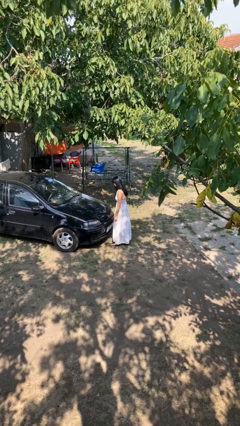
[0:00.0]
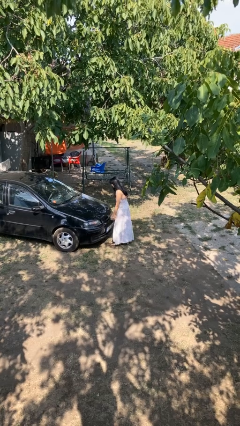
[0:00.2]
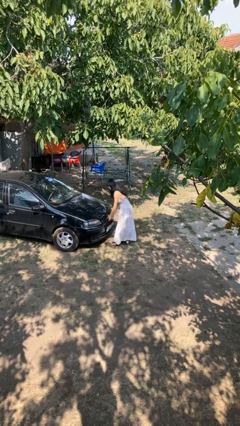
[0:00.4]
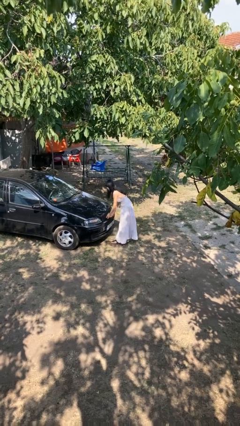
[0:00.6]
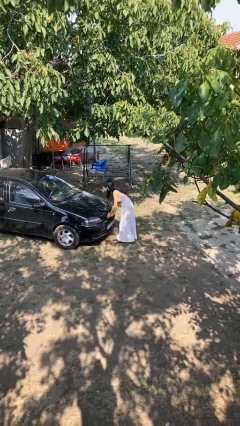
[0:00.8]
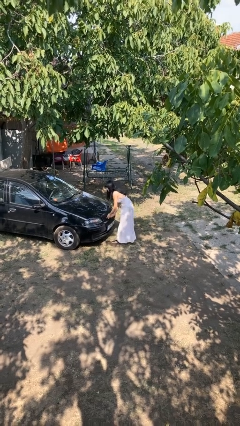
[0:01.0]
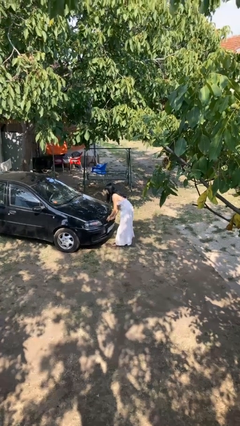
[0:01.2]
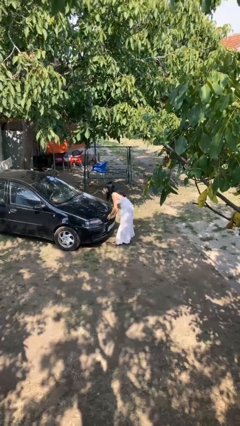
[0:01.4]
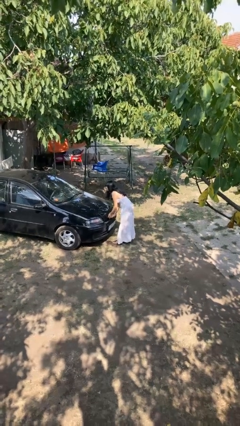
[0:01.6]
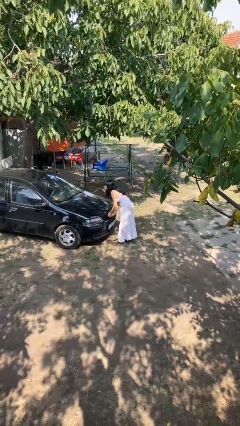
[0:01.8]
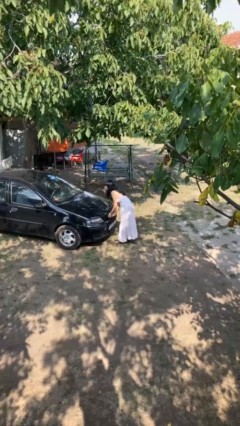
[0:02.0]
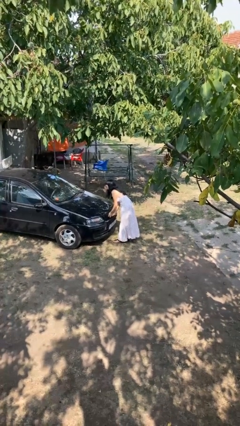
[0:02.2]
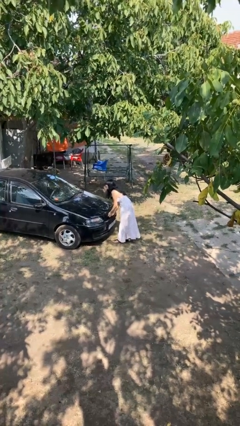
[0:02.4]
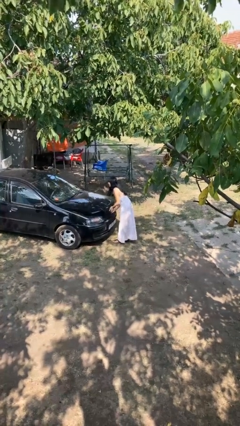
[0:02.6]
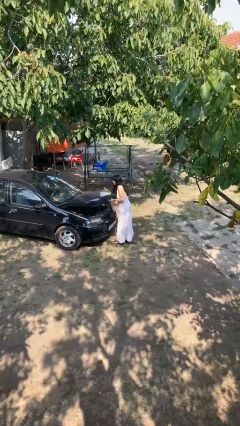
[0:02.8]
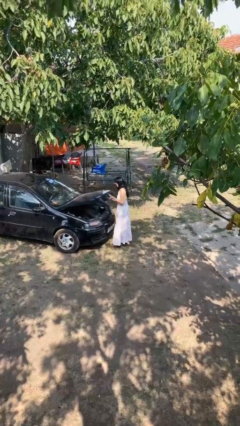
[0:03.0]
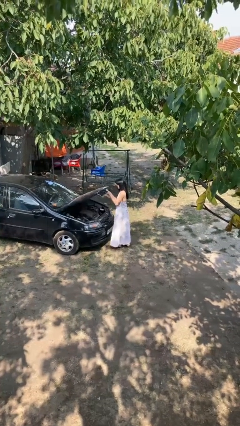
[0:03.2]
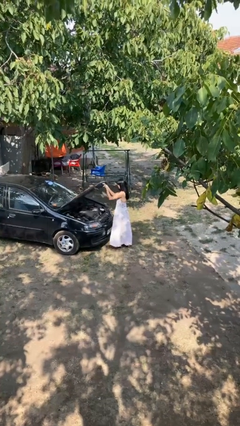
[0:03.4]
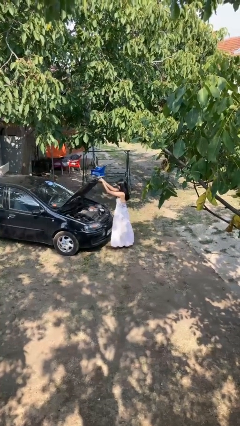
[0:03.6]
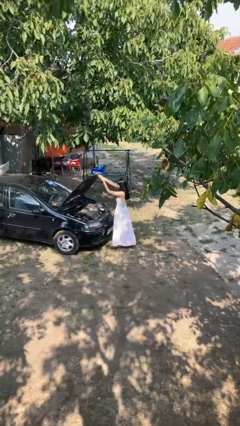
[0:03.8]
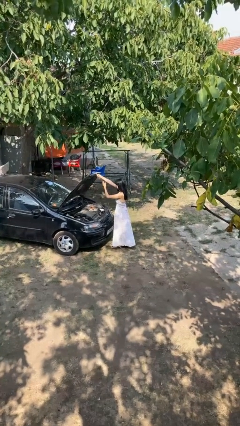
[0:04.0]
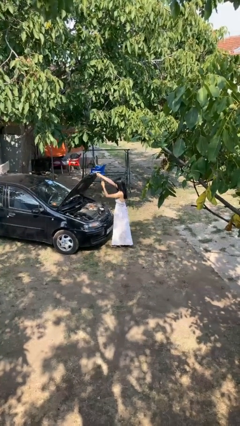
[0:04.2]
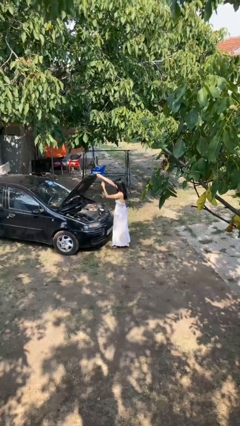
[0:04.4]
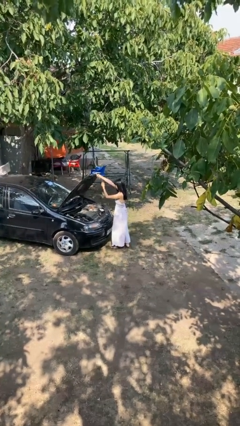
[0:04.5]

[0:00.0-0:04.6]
person opens car hood

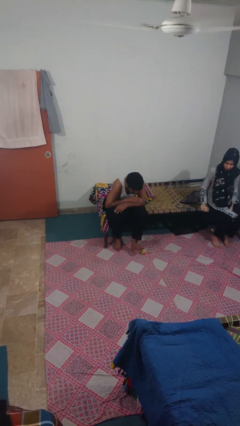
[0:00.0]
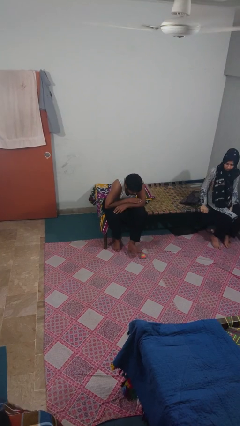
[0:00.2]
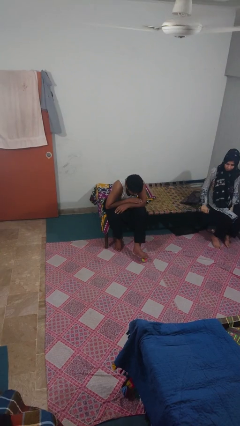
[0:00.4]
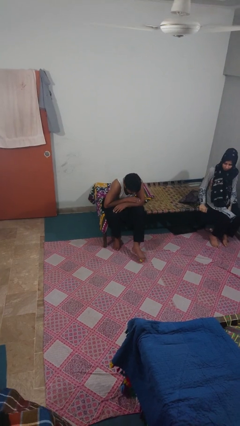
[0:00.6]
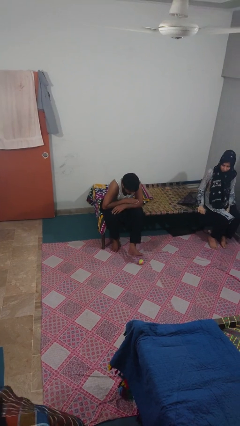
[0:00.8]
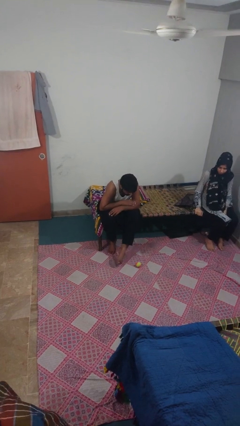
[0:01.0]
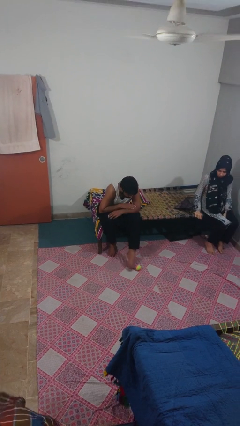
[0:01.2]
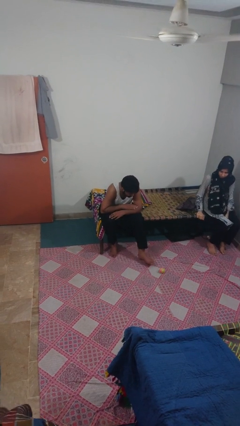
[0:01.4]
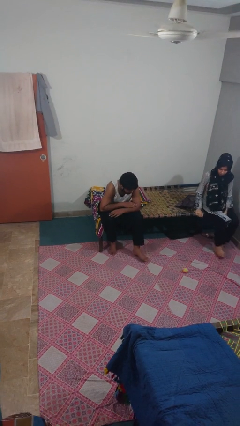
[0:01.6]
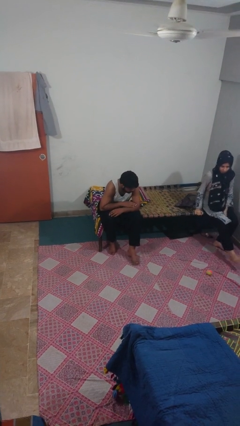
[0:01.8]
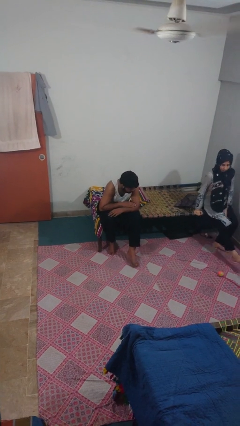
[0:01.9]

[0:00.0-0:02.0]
person kicks object to person

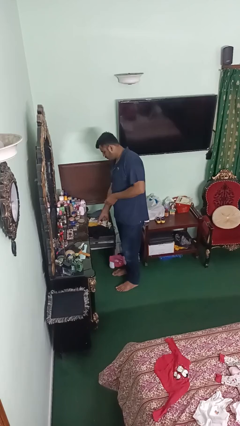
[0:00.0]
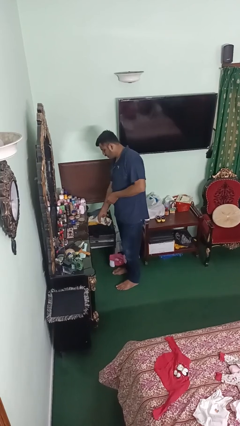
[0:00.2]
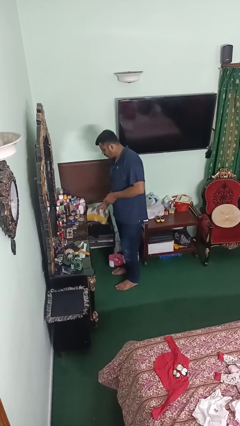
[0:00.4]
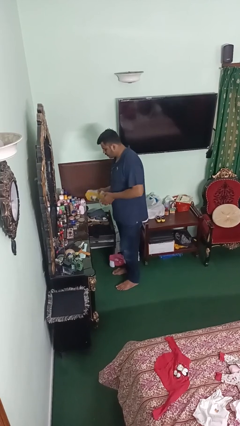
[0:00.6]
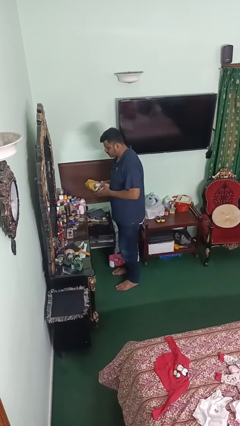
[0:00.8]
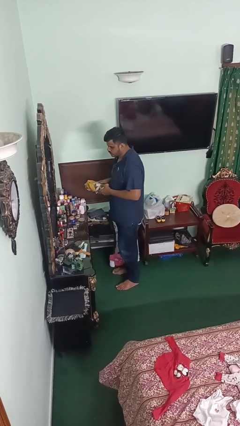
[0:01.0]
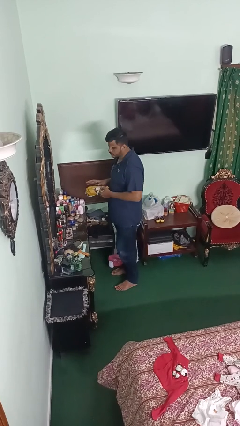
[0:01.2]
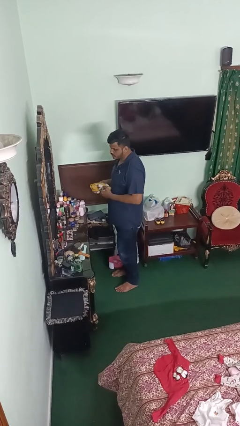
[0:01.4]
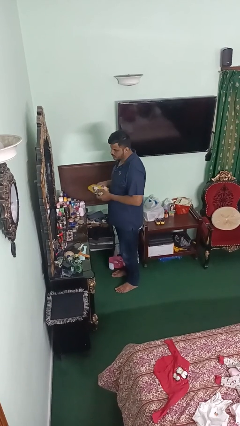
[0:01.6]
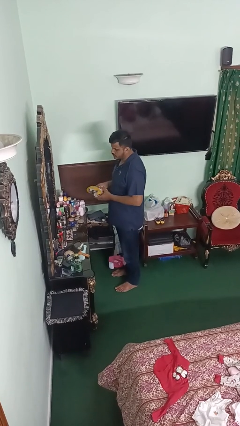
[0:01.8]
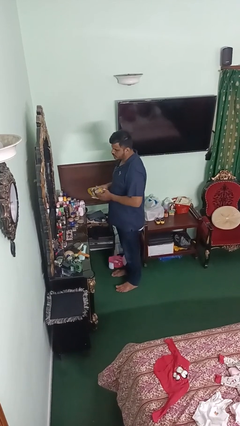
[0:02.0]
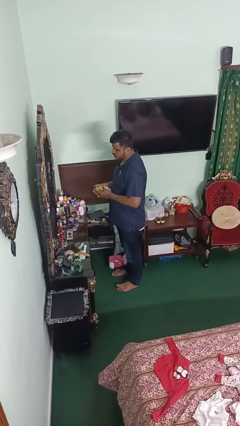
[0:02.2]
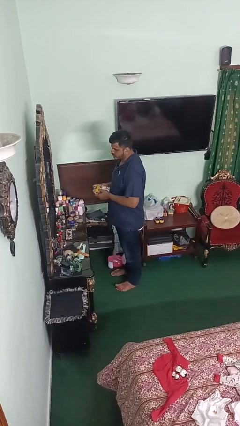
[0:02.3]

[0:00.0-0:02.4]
person takes clothes from dresser

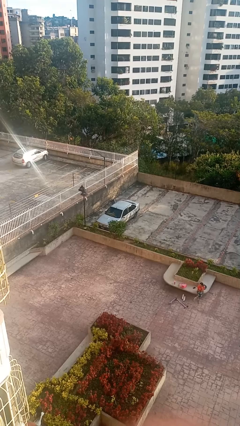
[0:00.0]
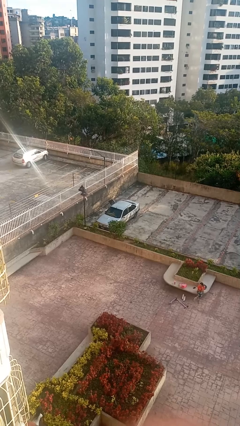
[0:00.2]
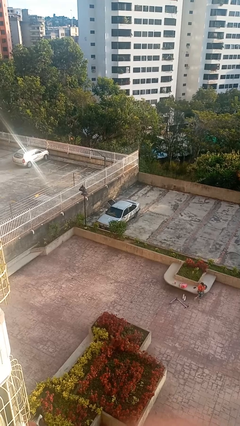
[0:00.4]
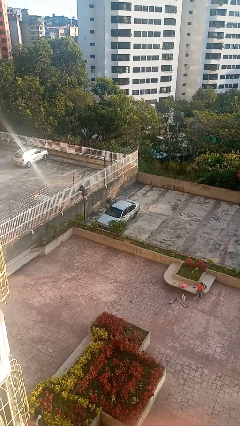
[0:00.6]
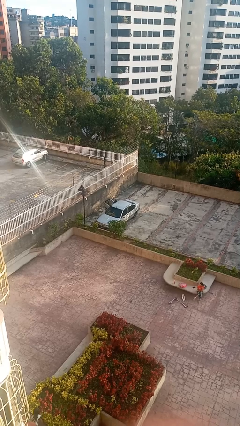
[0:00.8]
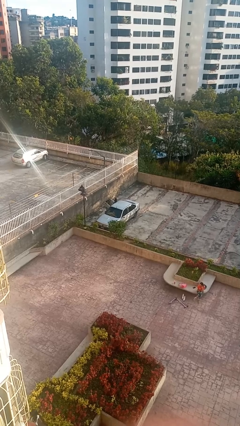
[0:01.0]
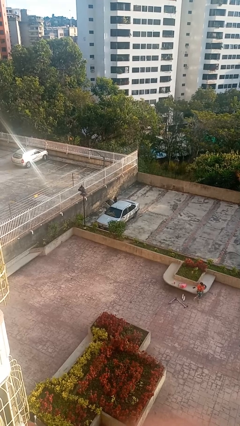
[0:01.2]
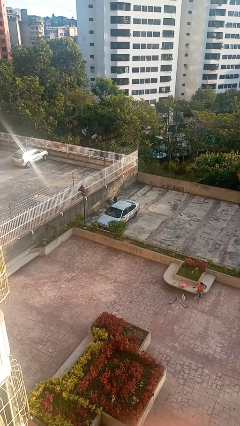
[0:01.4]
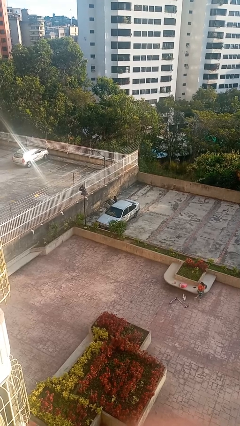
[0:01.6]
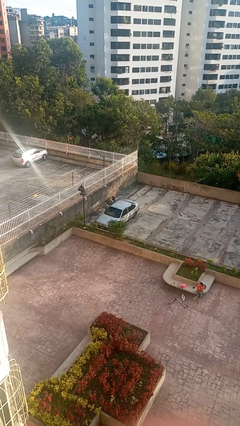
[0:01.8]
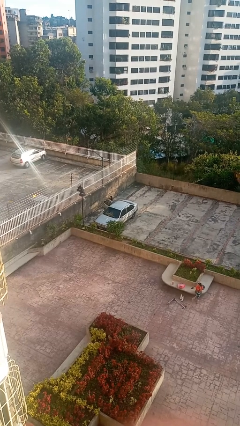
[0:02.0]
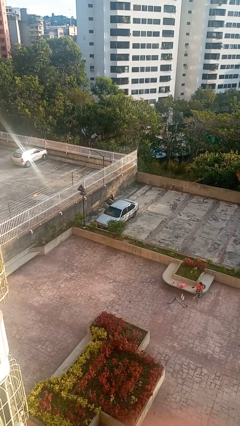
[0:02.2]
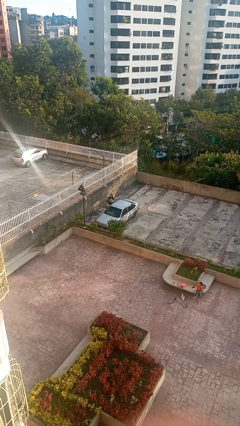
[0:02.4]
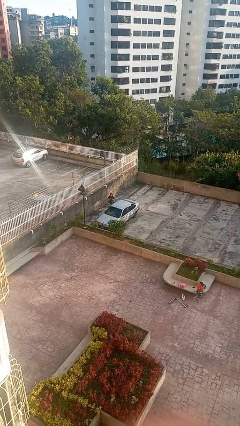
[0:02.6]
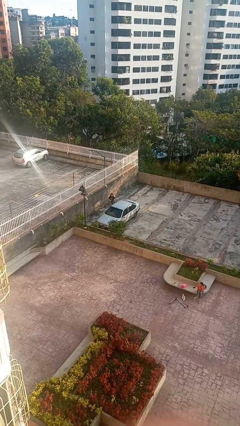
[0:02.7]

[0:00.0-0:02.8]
car drops off person

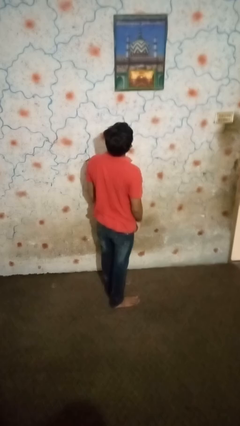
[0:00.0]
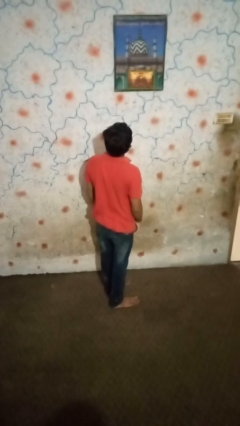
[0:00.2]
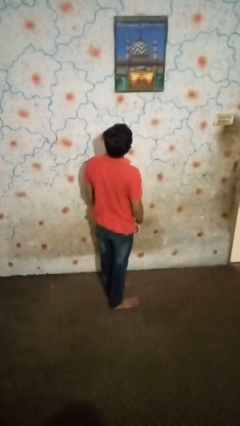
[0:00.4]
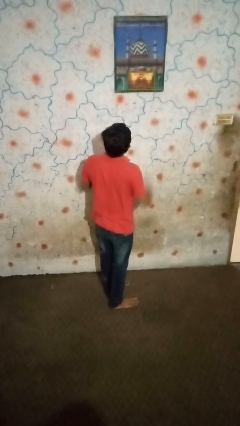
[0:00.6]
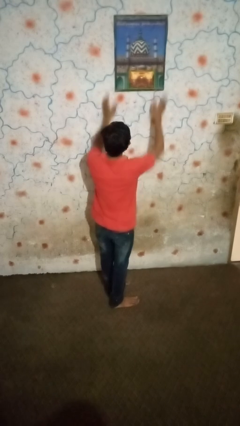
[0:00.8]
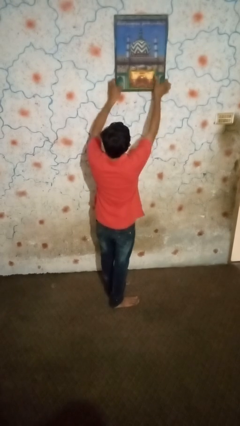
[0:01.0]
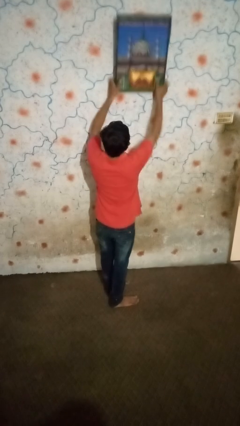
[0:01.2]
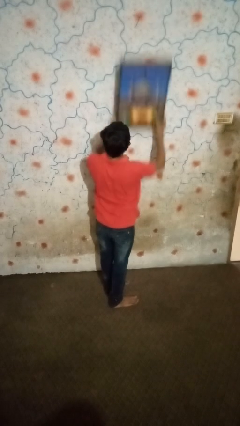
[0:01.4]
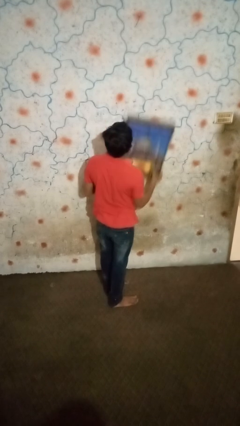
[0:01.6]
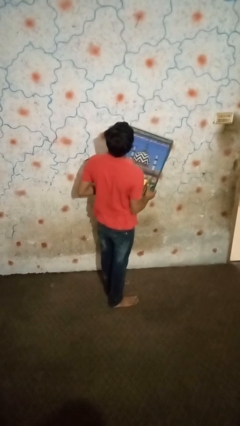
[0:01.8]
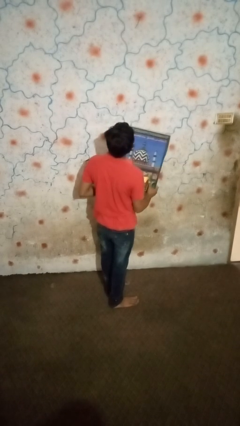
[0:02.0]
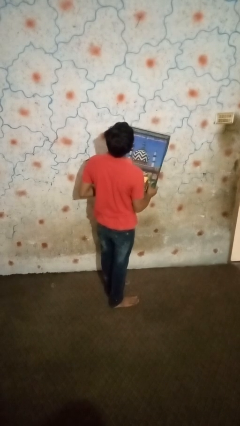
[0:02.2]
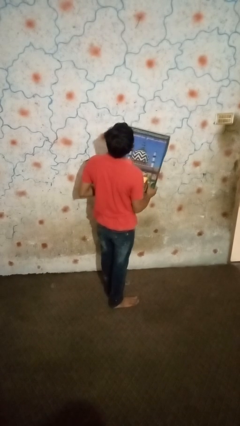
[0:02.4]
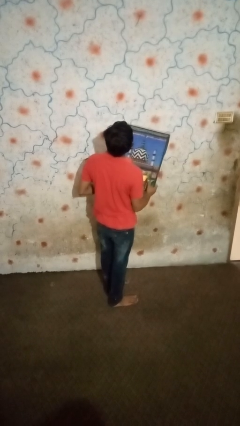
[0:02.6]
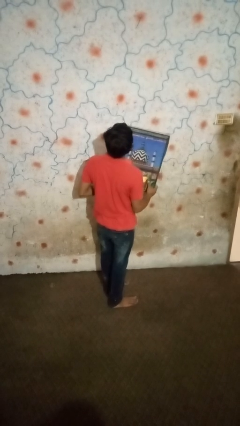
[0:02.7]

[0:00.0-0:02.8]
person takes down picture frame

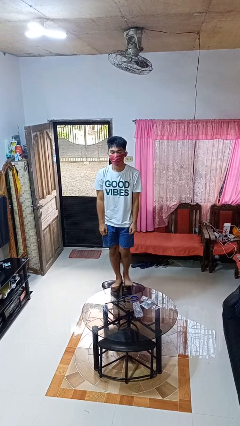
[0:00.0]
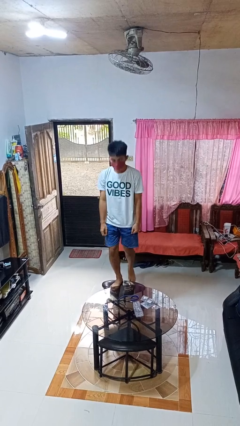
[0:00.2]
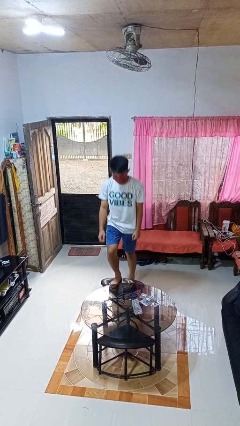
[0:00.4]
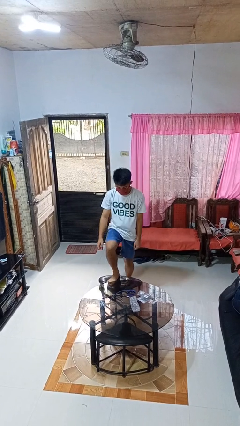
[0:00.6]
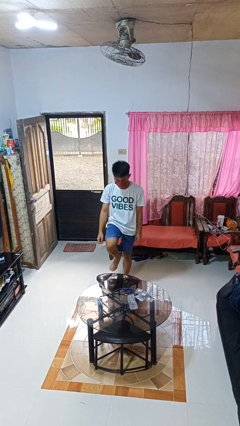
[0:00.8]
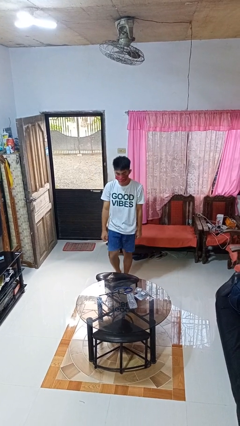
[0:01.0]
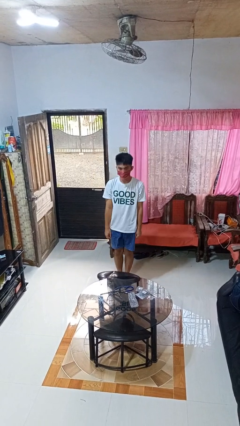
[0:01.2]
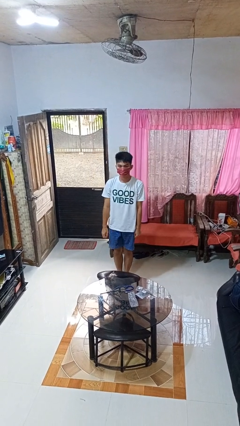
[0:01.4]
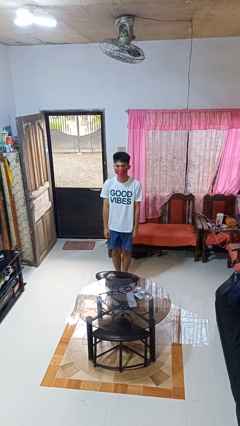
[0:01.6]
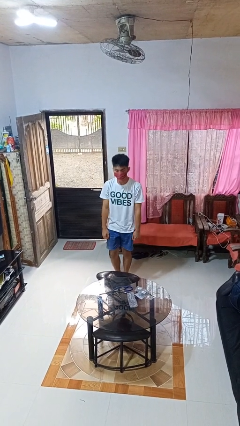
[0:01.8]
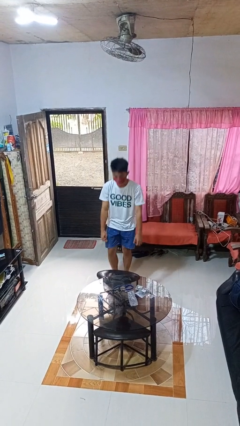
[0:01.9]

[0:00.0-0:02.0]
person climbs off chair

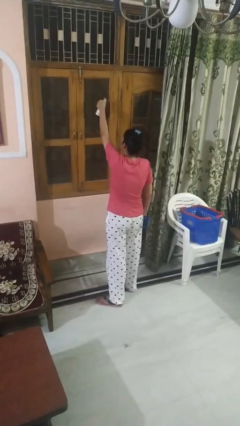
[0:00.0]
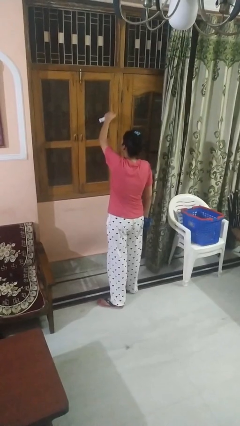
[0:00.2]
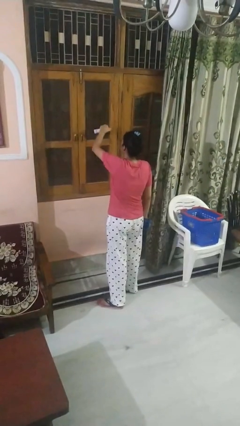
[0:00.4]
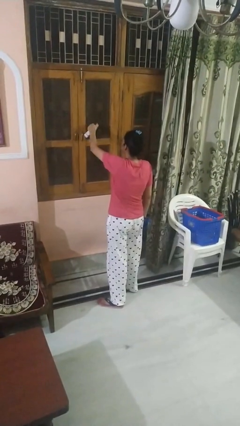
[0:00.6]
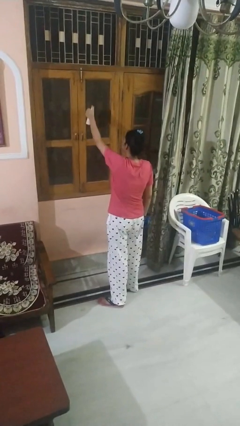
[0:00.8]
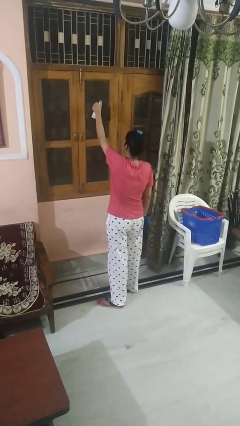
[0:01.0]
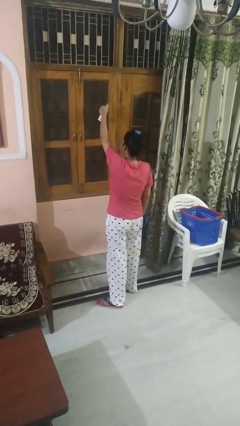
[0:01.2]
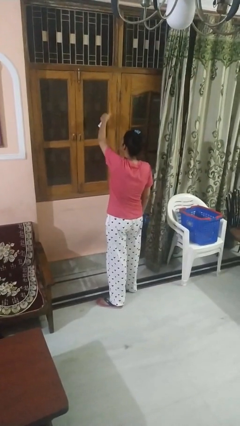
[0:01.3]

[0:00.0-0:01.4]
person sprays from bottle
